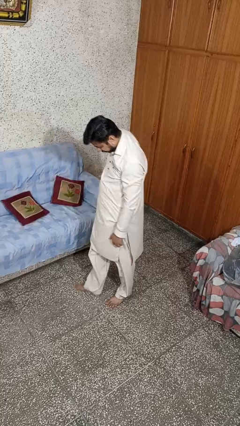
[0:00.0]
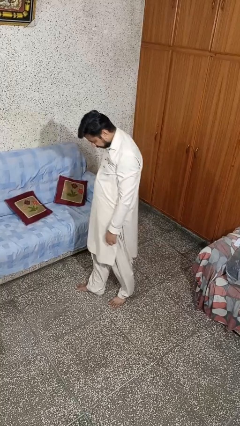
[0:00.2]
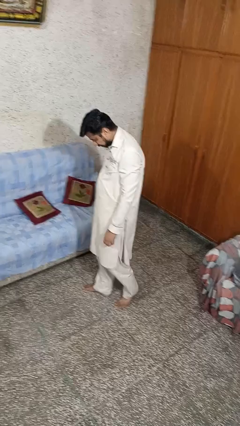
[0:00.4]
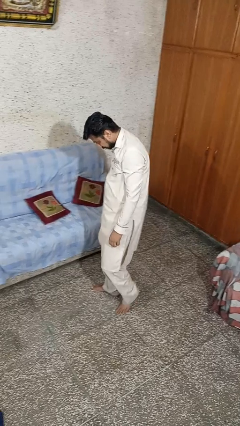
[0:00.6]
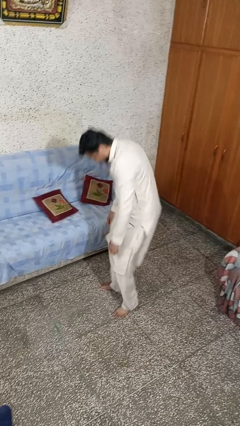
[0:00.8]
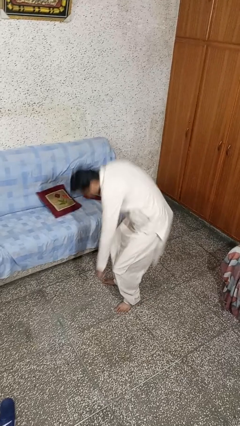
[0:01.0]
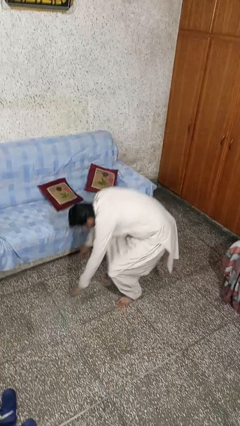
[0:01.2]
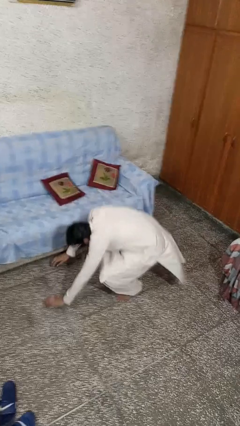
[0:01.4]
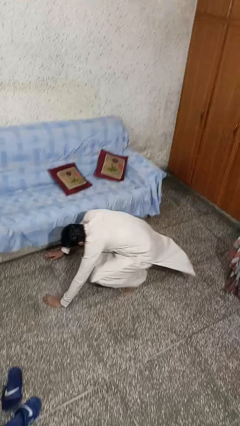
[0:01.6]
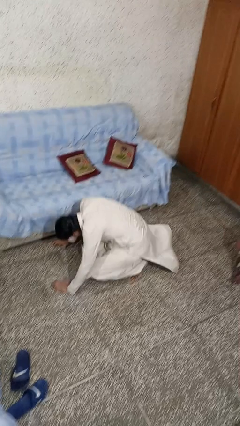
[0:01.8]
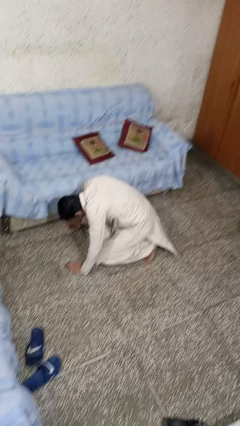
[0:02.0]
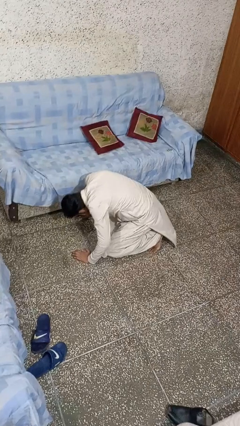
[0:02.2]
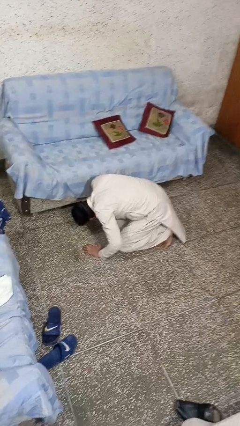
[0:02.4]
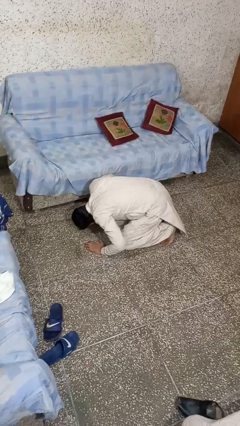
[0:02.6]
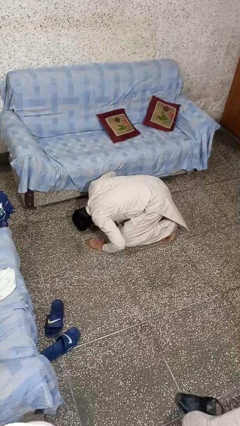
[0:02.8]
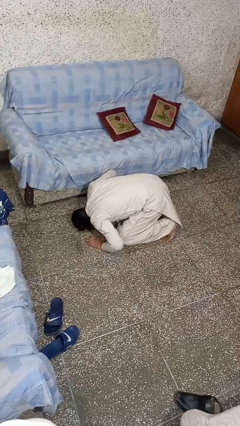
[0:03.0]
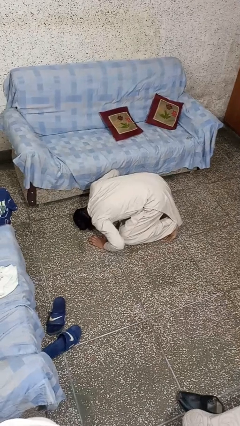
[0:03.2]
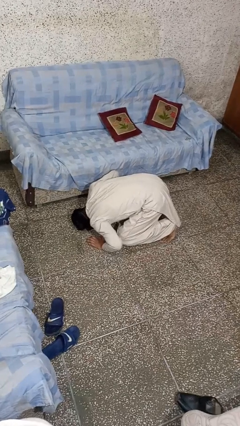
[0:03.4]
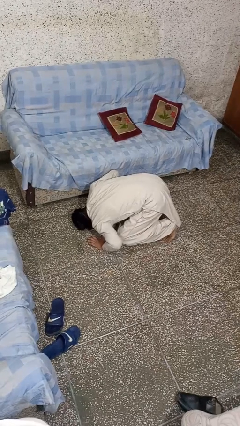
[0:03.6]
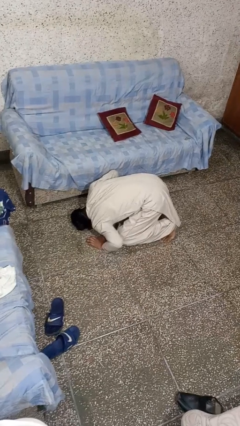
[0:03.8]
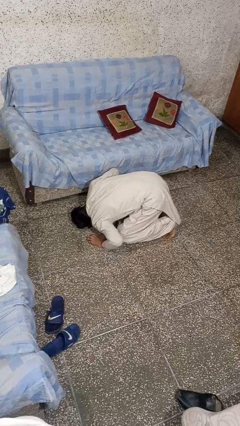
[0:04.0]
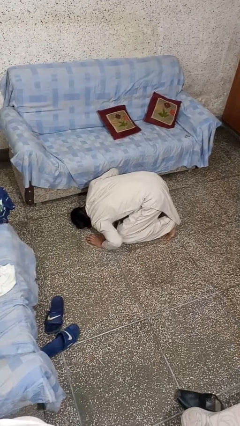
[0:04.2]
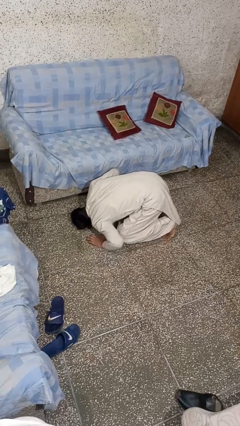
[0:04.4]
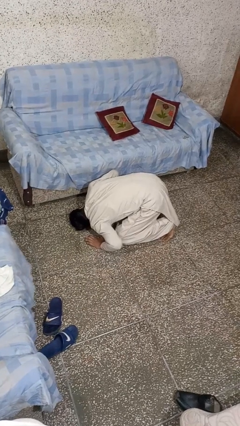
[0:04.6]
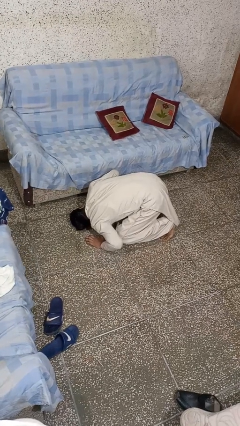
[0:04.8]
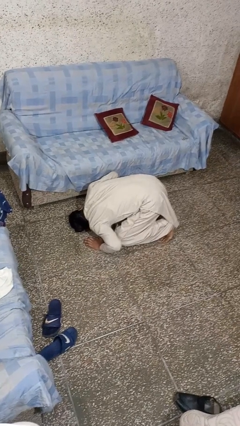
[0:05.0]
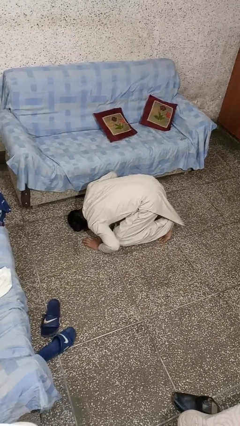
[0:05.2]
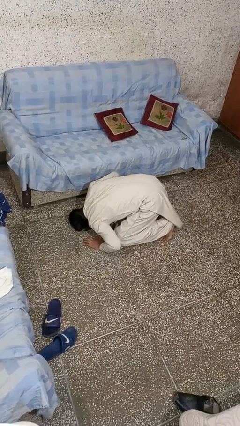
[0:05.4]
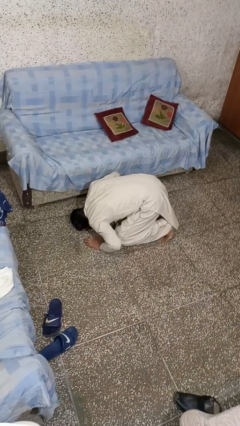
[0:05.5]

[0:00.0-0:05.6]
person searches under couch

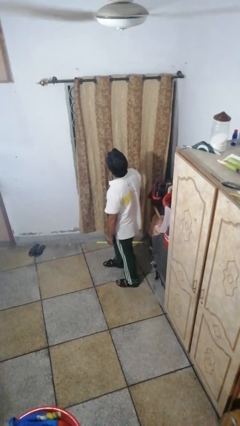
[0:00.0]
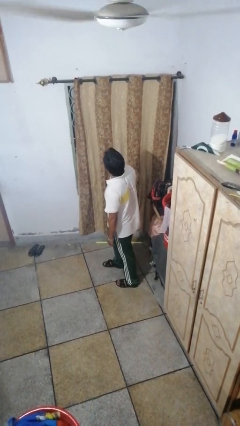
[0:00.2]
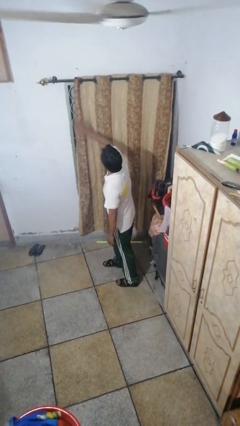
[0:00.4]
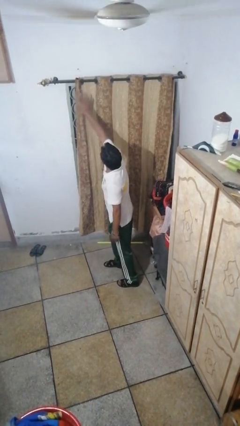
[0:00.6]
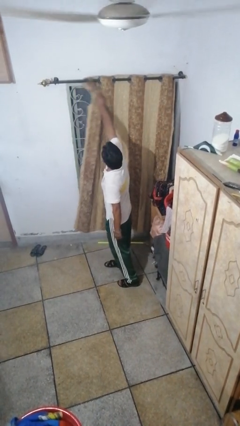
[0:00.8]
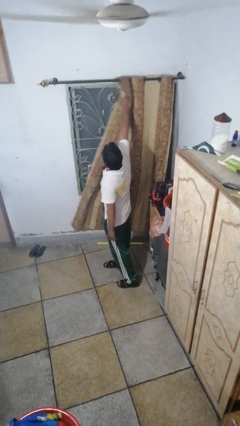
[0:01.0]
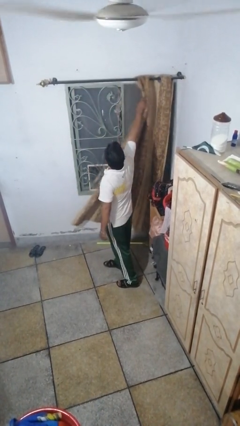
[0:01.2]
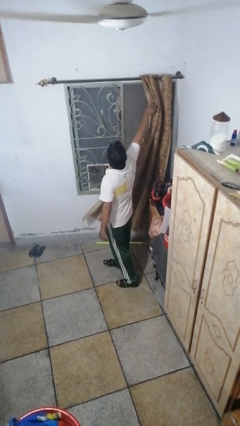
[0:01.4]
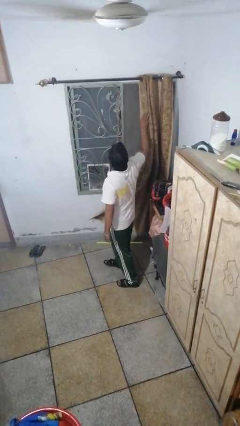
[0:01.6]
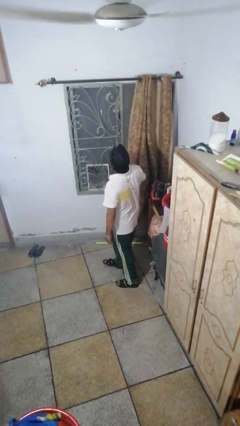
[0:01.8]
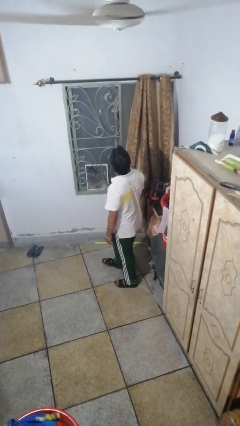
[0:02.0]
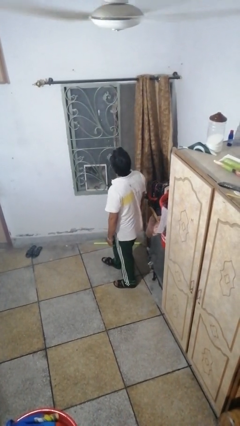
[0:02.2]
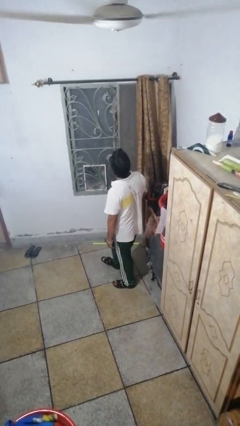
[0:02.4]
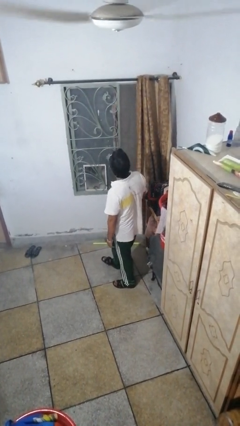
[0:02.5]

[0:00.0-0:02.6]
person opens curtains

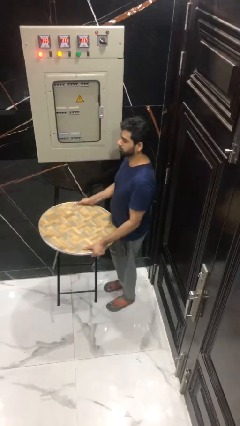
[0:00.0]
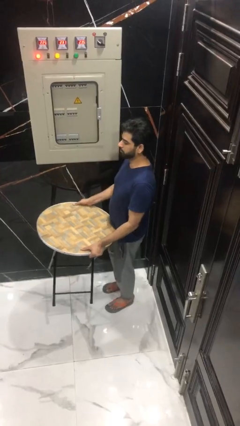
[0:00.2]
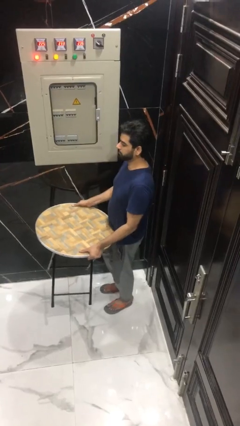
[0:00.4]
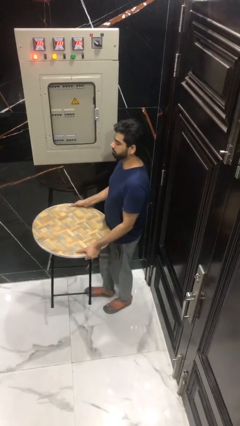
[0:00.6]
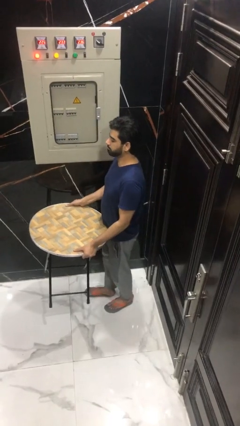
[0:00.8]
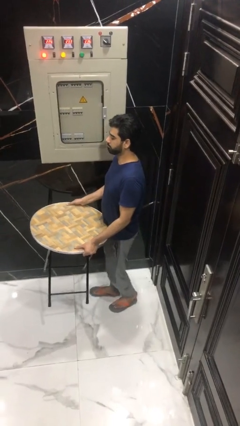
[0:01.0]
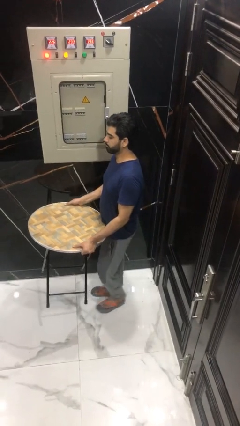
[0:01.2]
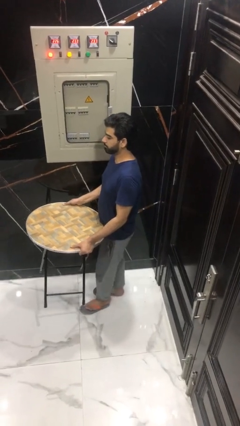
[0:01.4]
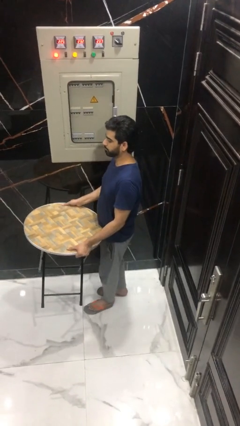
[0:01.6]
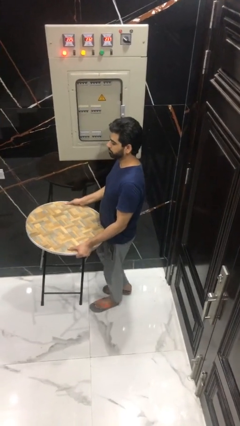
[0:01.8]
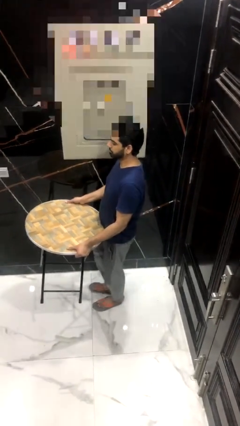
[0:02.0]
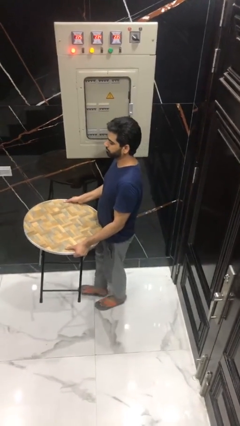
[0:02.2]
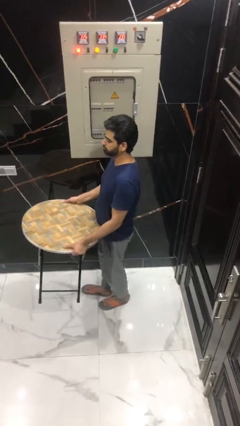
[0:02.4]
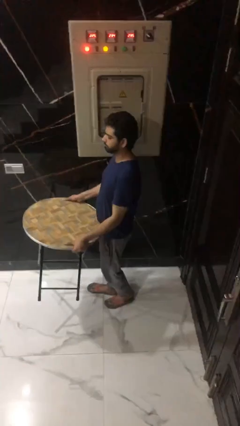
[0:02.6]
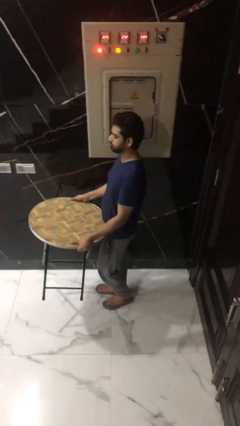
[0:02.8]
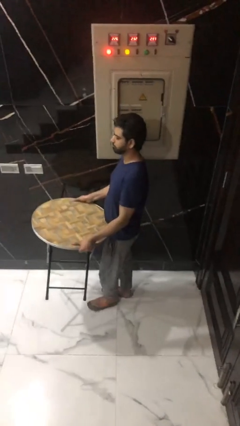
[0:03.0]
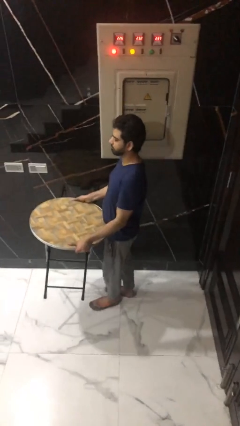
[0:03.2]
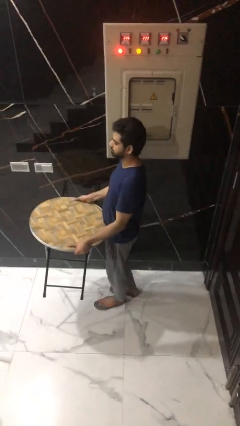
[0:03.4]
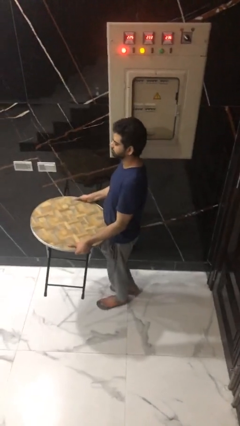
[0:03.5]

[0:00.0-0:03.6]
person carries heavy object

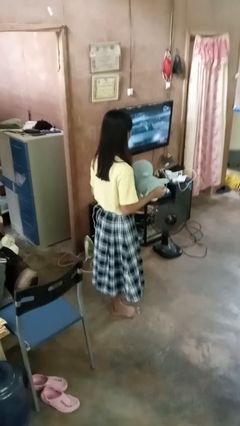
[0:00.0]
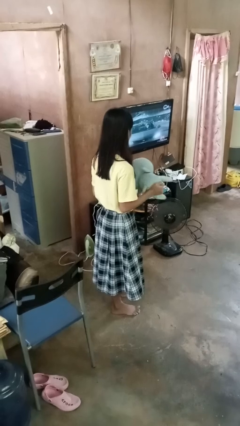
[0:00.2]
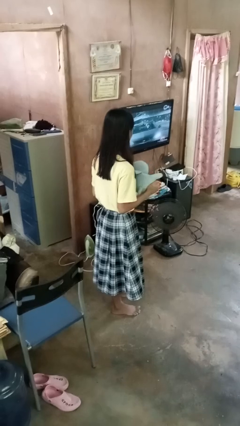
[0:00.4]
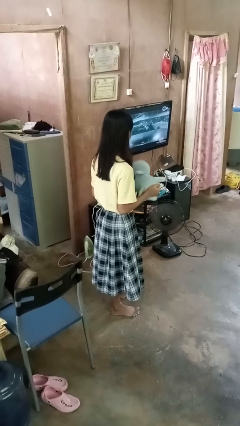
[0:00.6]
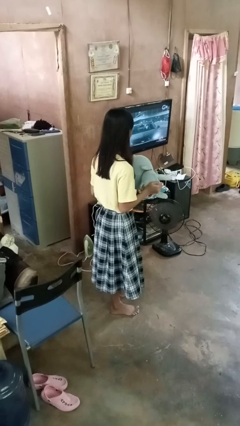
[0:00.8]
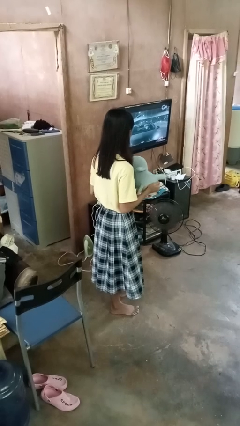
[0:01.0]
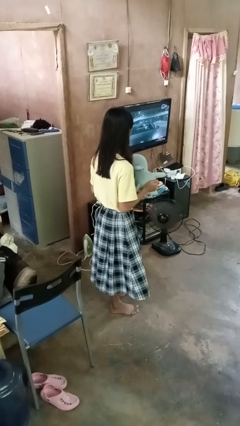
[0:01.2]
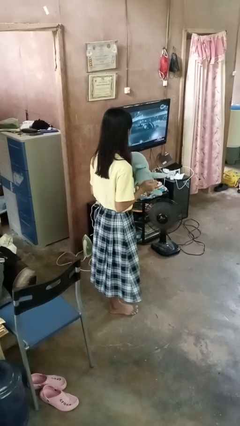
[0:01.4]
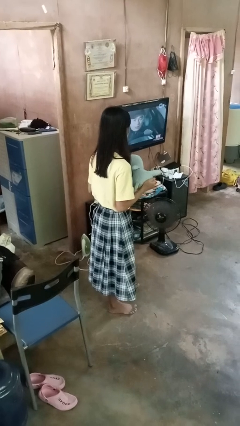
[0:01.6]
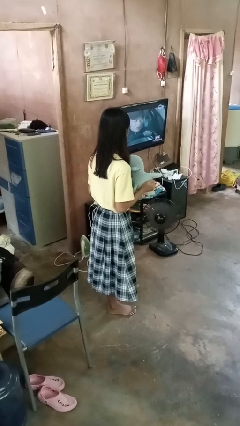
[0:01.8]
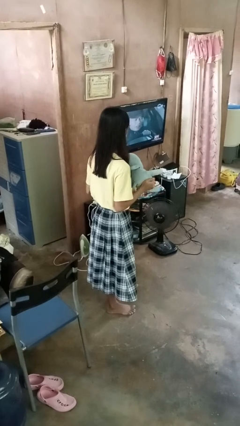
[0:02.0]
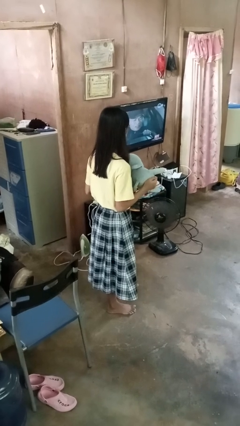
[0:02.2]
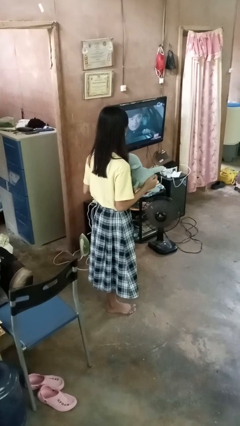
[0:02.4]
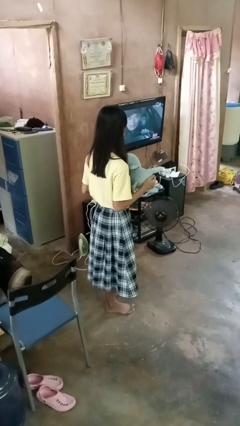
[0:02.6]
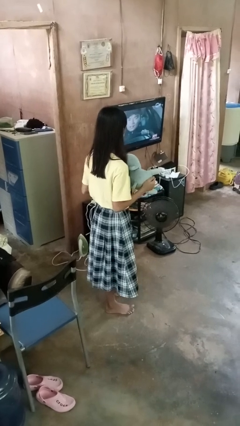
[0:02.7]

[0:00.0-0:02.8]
person squeezes object

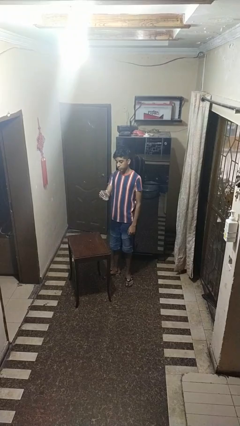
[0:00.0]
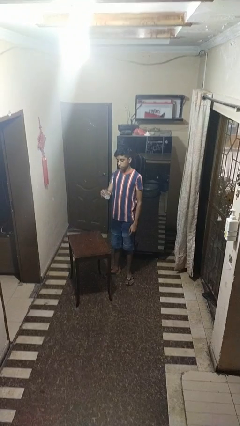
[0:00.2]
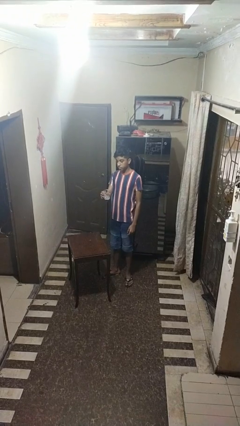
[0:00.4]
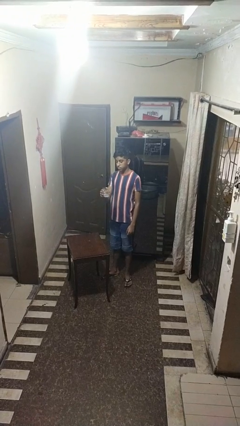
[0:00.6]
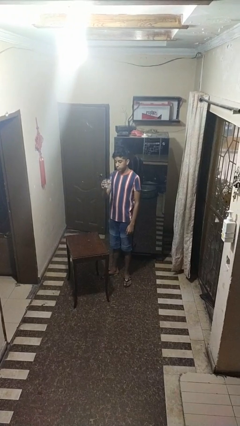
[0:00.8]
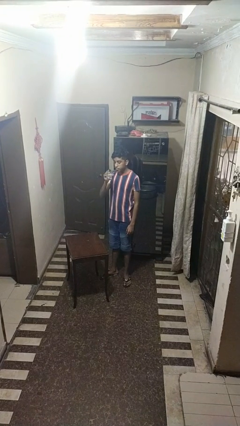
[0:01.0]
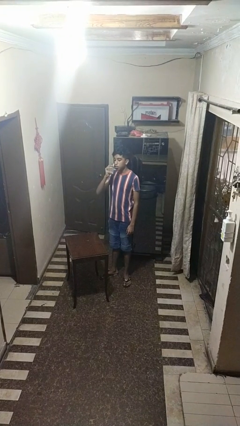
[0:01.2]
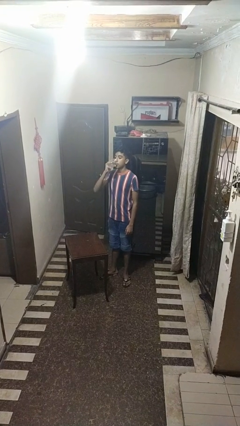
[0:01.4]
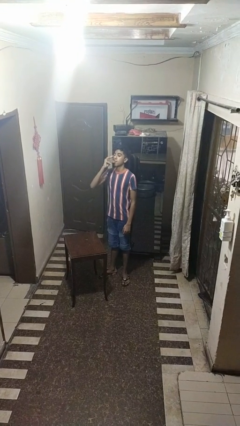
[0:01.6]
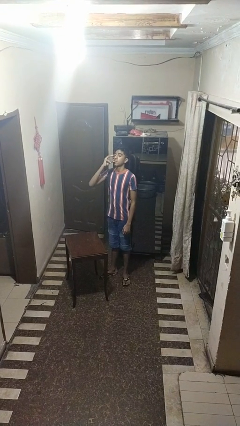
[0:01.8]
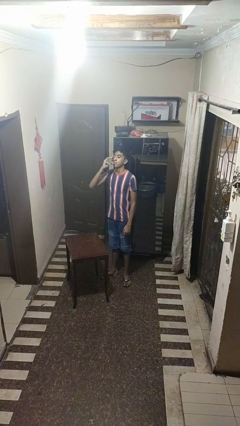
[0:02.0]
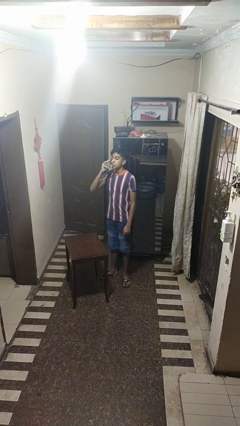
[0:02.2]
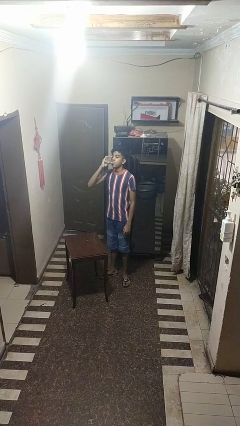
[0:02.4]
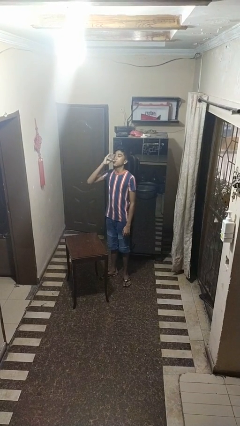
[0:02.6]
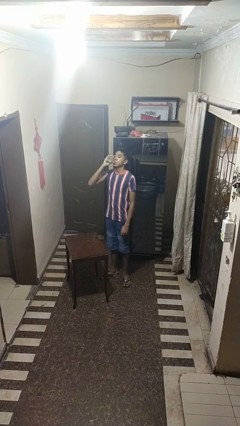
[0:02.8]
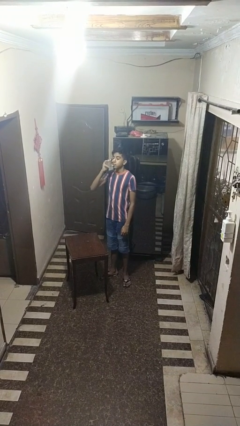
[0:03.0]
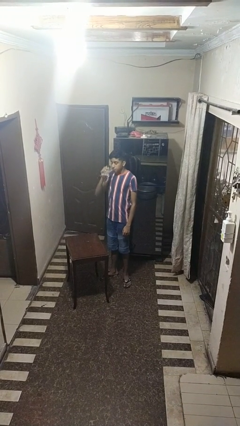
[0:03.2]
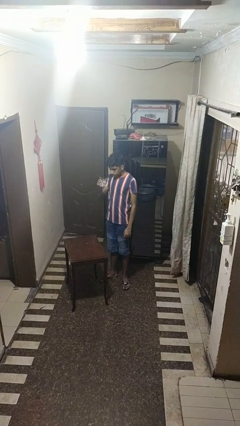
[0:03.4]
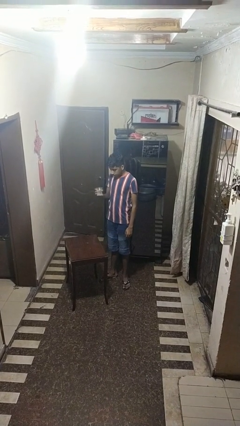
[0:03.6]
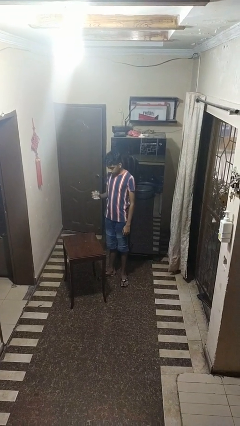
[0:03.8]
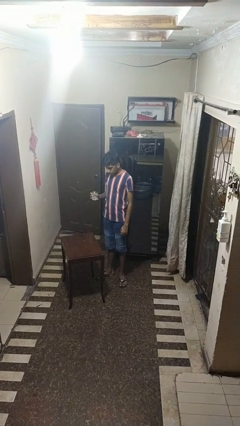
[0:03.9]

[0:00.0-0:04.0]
person drinks from shotglass
